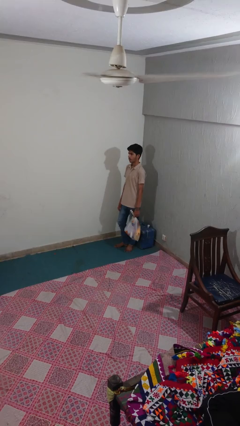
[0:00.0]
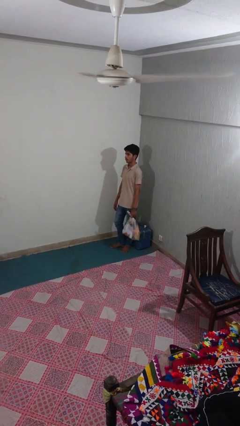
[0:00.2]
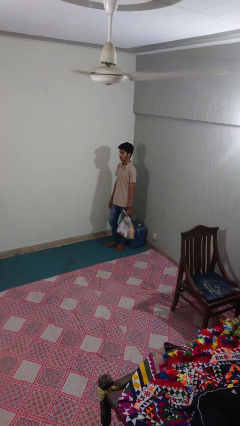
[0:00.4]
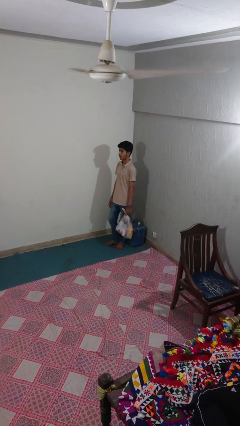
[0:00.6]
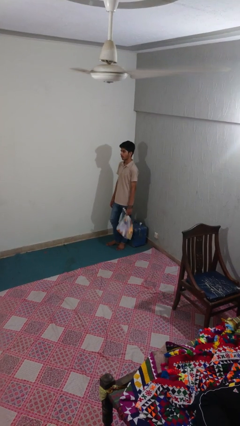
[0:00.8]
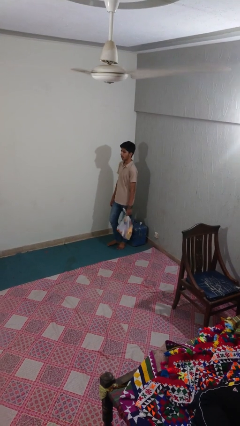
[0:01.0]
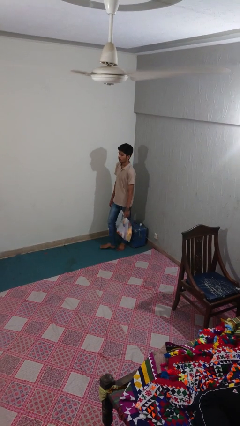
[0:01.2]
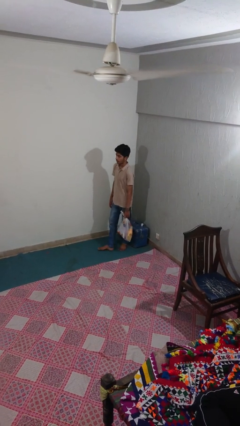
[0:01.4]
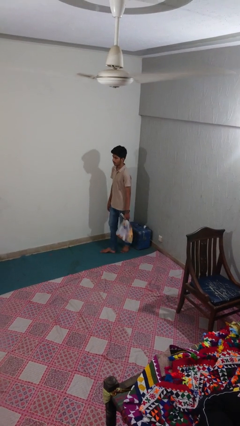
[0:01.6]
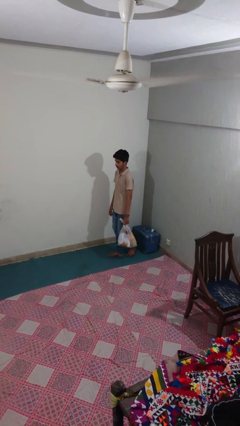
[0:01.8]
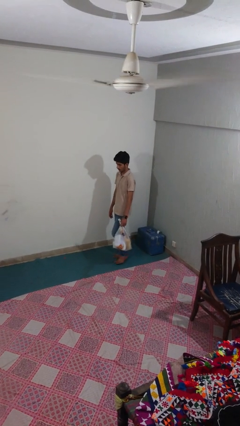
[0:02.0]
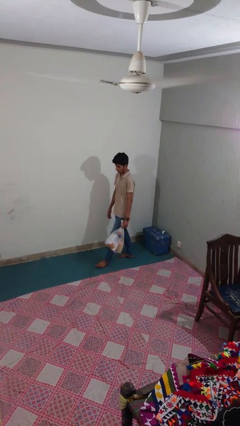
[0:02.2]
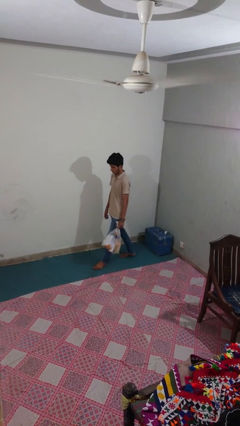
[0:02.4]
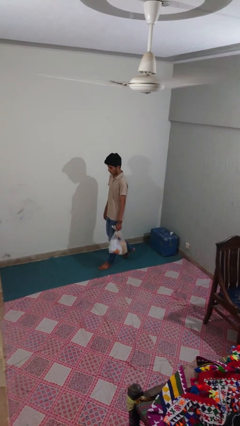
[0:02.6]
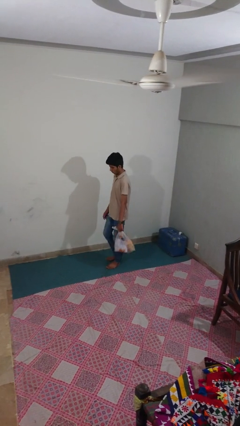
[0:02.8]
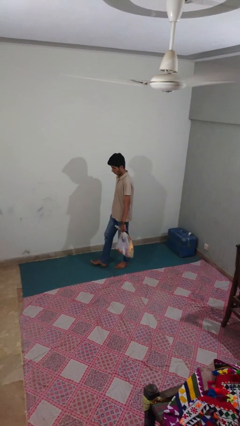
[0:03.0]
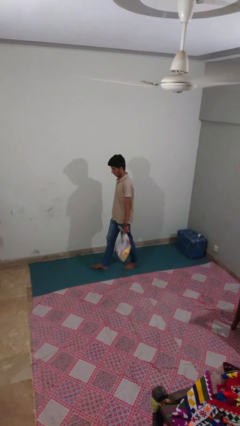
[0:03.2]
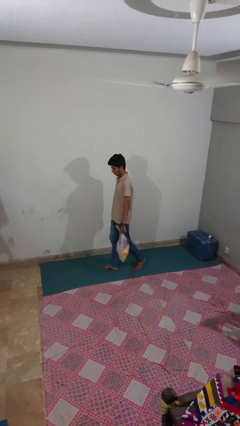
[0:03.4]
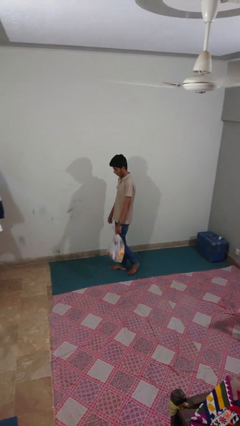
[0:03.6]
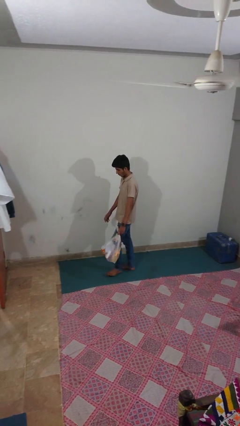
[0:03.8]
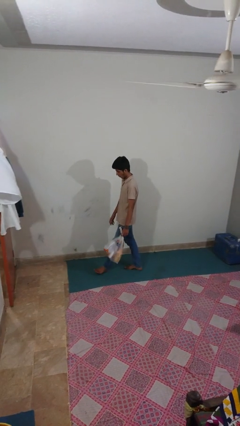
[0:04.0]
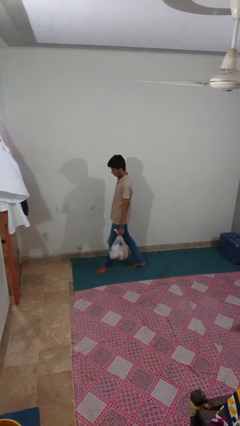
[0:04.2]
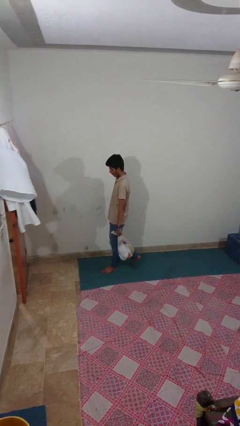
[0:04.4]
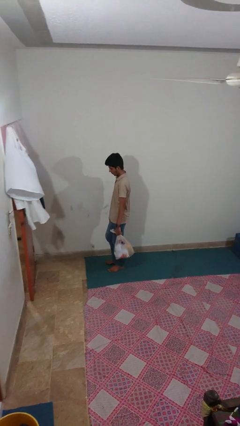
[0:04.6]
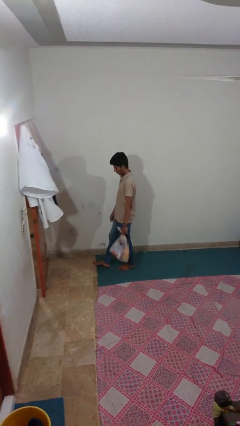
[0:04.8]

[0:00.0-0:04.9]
person carries groceries

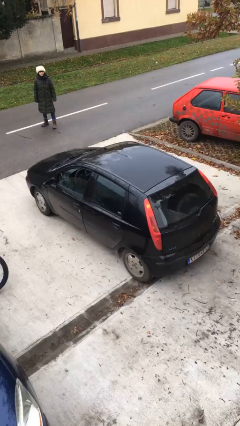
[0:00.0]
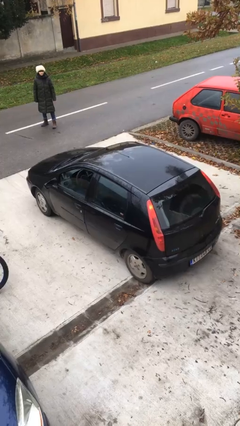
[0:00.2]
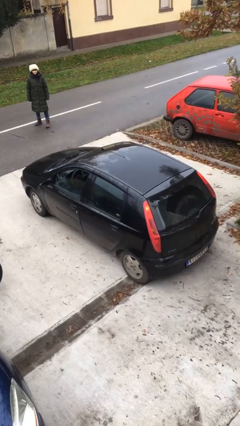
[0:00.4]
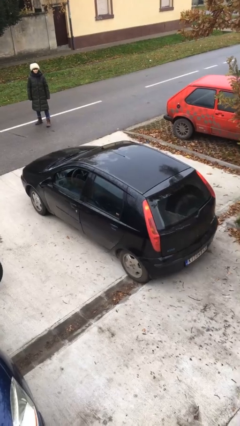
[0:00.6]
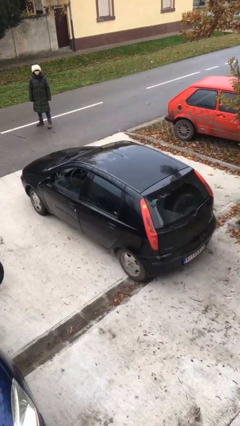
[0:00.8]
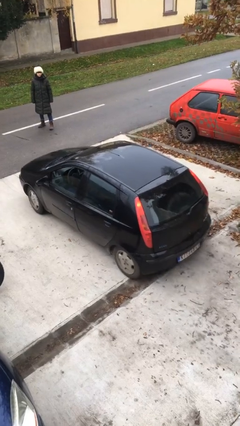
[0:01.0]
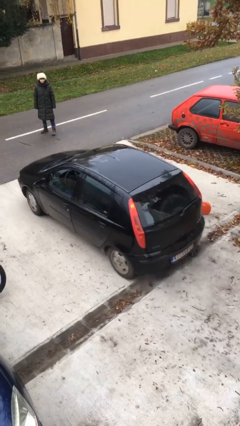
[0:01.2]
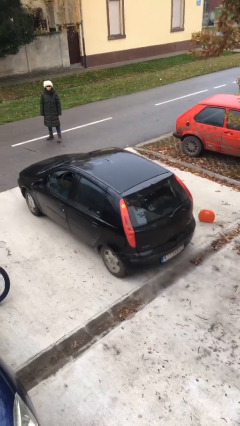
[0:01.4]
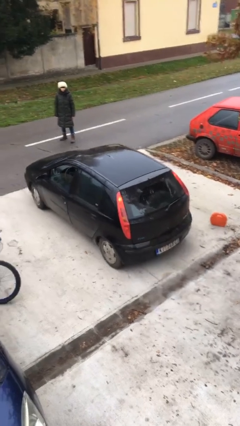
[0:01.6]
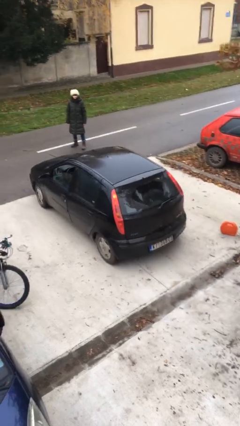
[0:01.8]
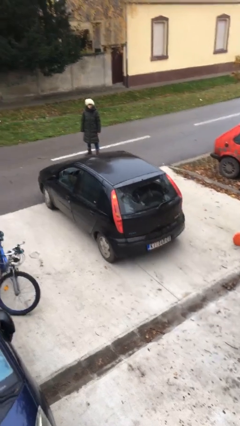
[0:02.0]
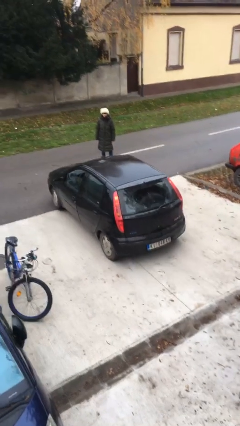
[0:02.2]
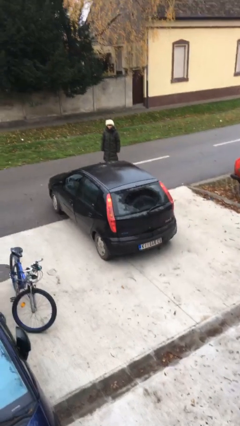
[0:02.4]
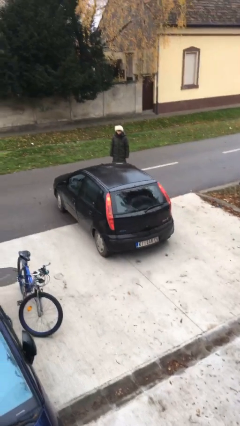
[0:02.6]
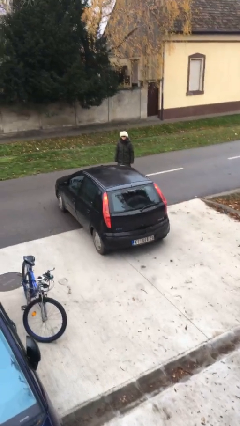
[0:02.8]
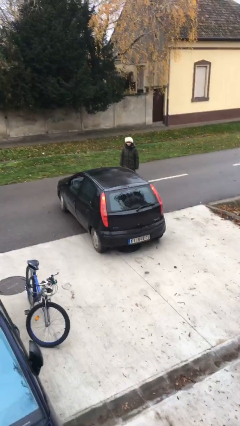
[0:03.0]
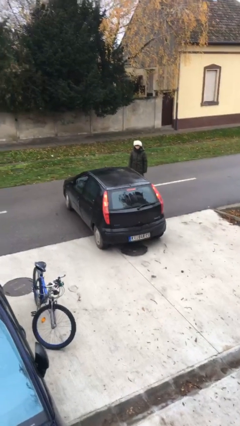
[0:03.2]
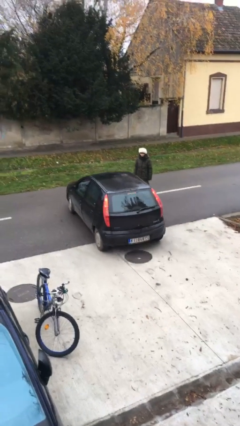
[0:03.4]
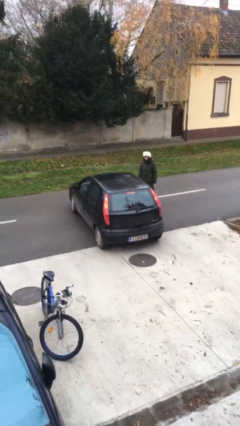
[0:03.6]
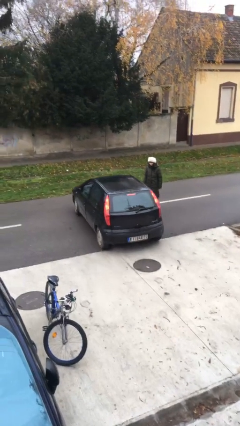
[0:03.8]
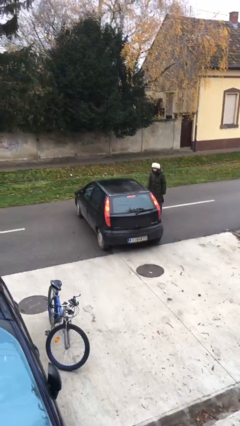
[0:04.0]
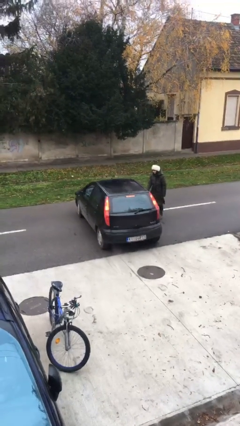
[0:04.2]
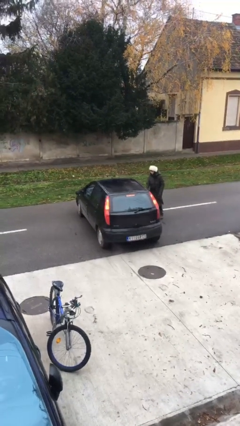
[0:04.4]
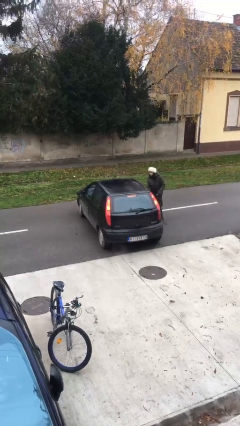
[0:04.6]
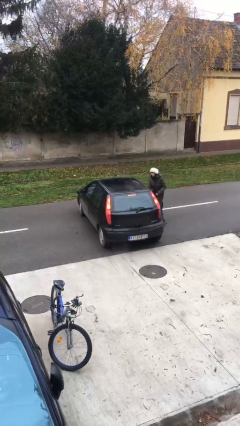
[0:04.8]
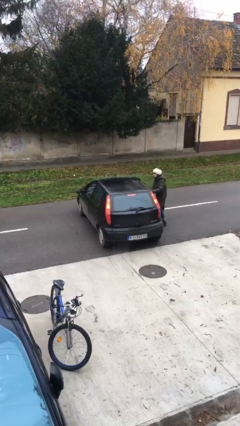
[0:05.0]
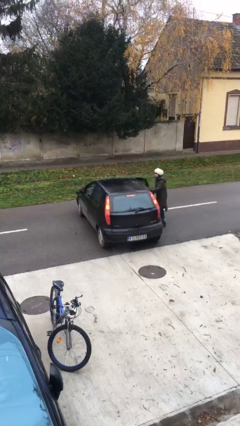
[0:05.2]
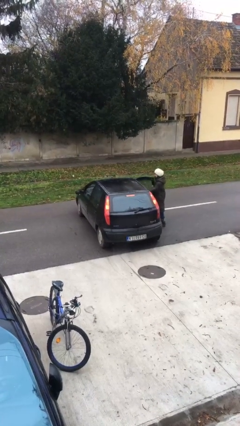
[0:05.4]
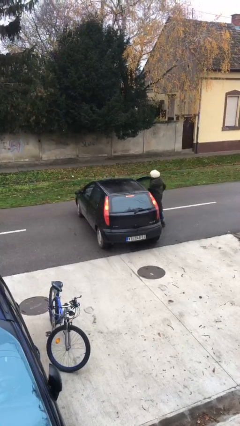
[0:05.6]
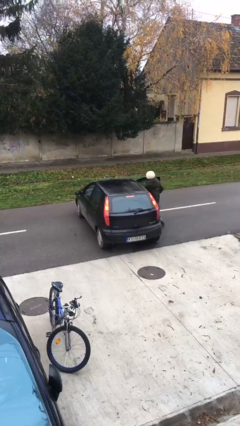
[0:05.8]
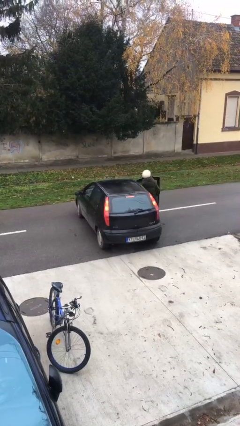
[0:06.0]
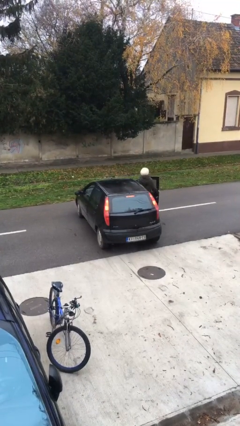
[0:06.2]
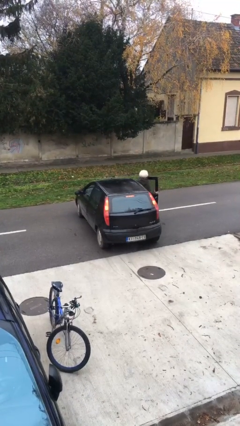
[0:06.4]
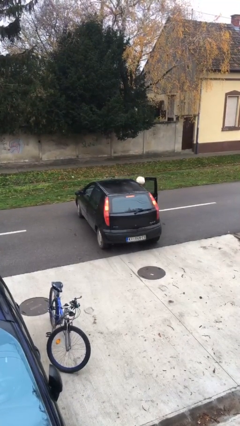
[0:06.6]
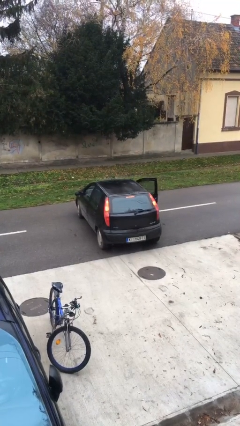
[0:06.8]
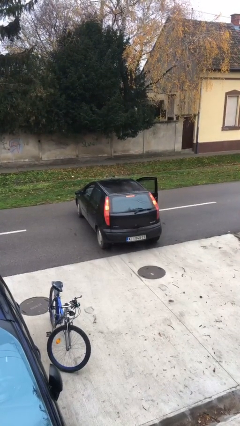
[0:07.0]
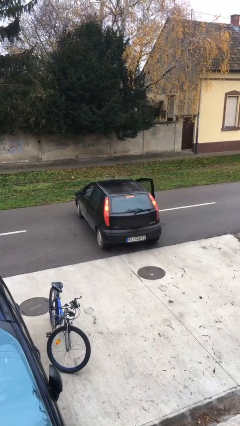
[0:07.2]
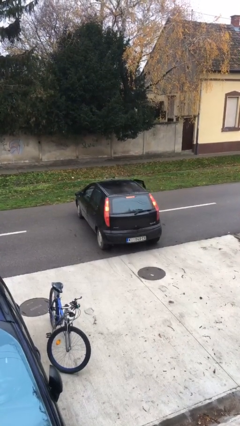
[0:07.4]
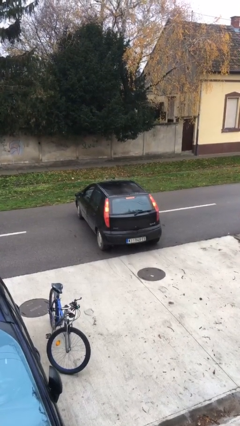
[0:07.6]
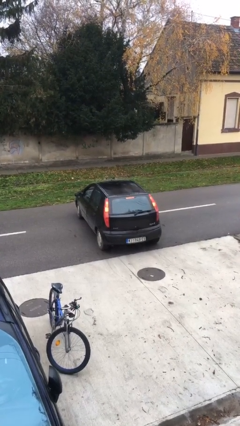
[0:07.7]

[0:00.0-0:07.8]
car picks up person

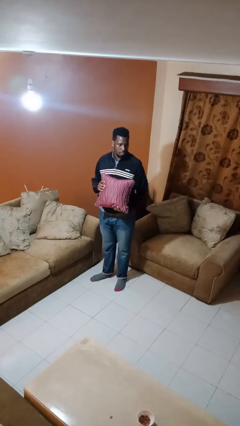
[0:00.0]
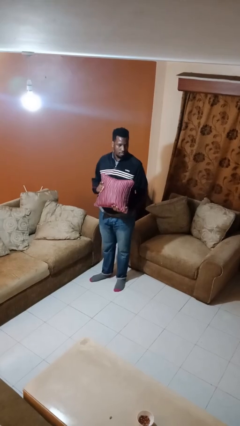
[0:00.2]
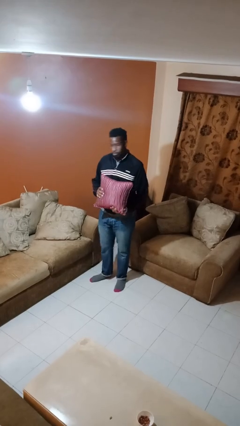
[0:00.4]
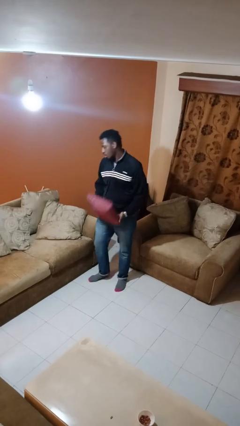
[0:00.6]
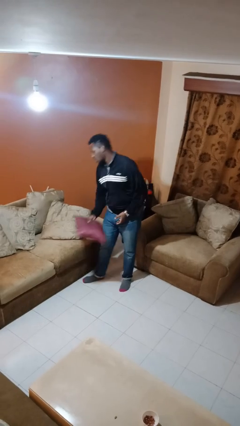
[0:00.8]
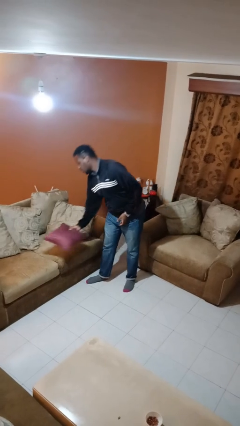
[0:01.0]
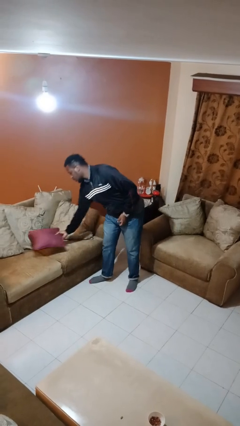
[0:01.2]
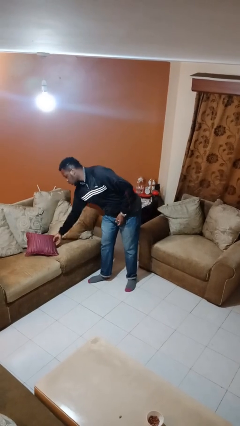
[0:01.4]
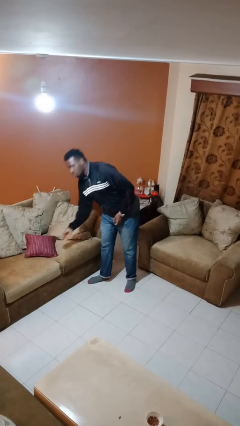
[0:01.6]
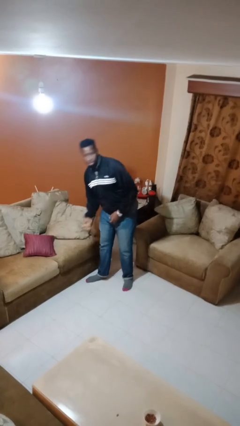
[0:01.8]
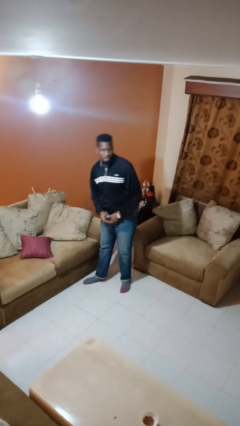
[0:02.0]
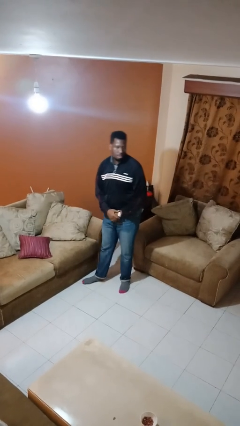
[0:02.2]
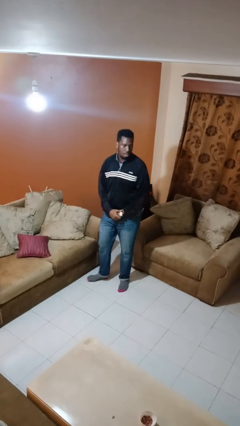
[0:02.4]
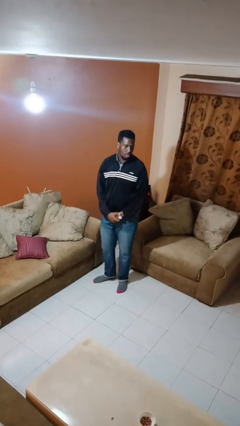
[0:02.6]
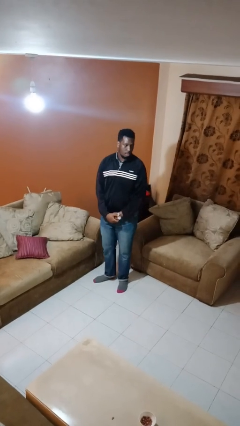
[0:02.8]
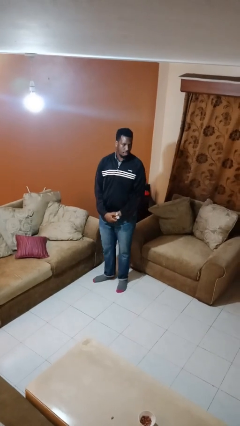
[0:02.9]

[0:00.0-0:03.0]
person puts down object on couch

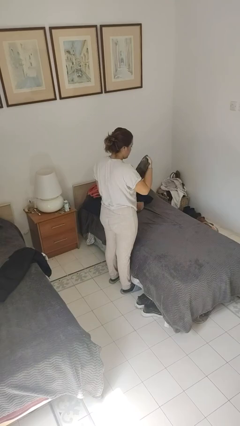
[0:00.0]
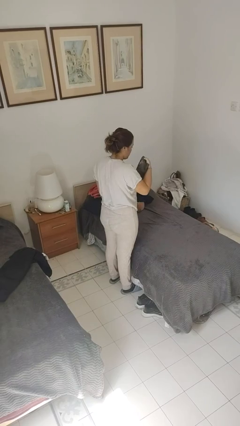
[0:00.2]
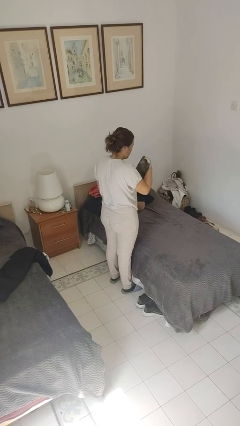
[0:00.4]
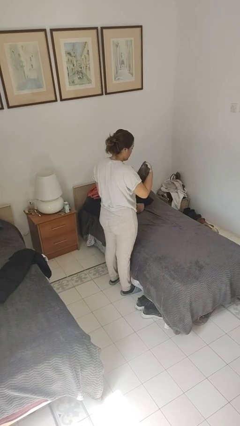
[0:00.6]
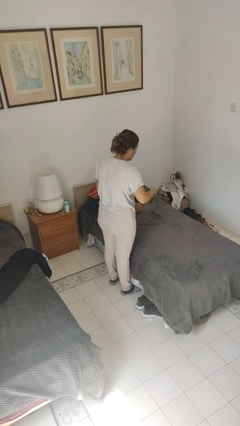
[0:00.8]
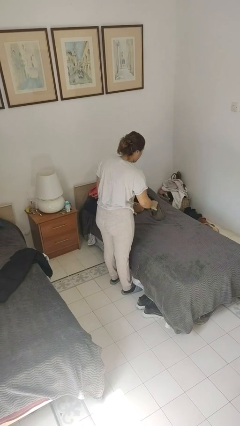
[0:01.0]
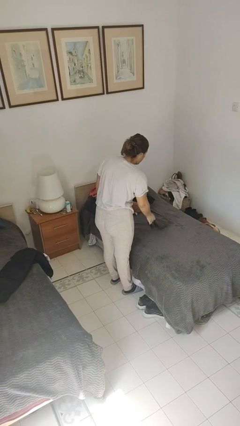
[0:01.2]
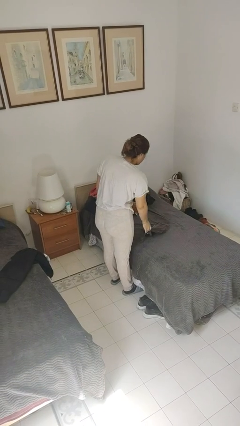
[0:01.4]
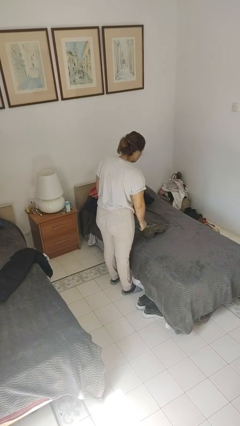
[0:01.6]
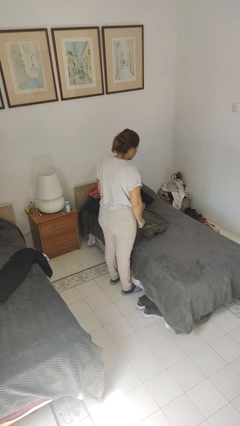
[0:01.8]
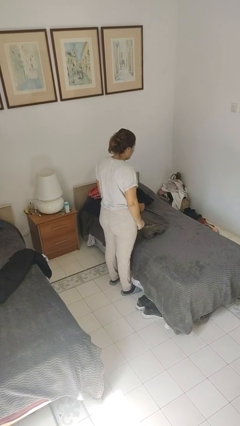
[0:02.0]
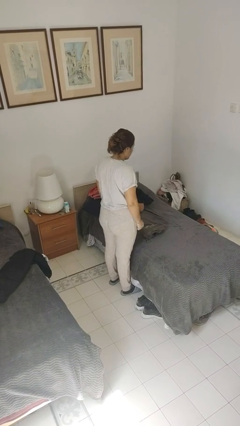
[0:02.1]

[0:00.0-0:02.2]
person puts down object on bed
